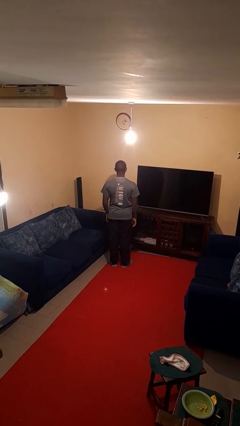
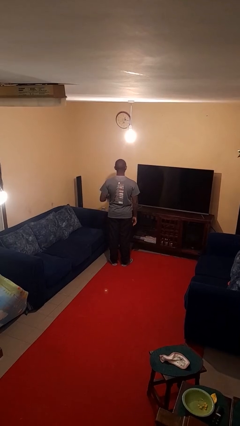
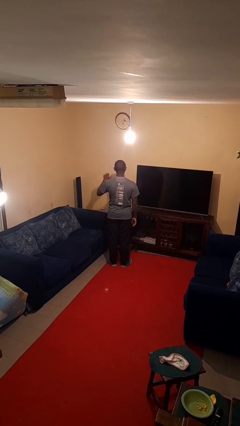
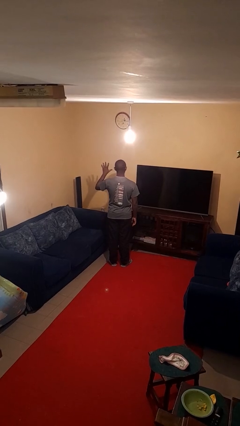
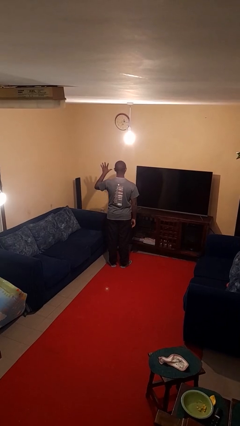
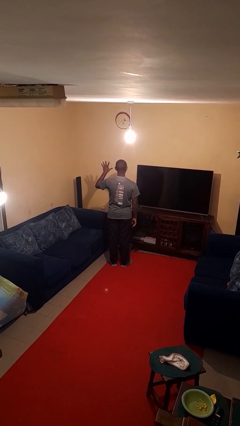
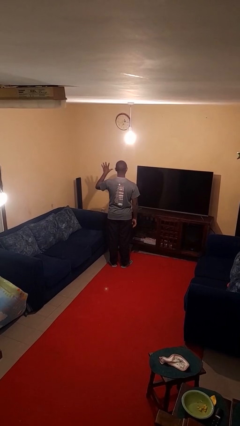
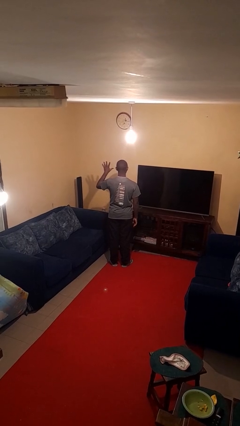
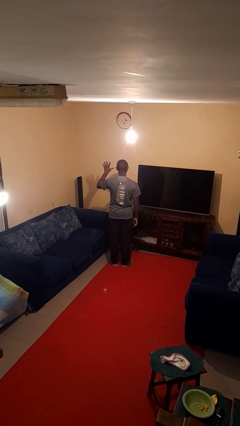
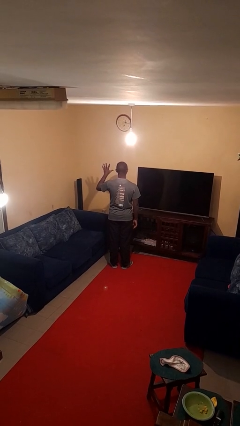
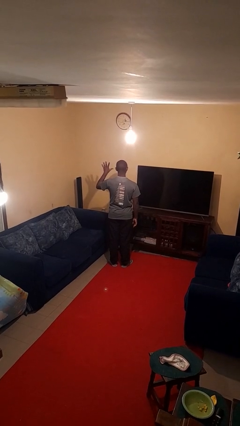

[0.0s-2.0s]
person gestures number five

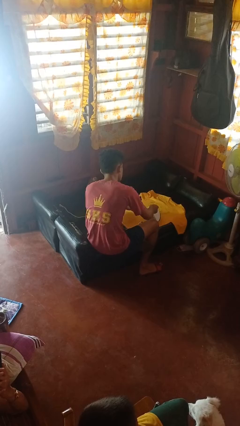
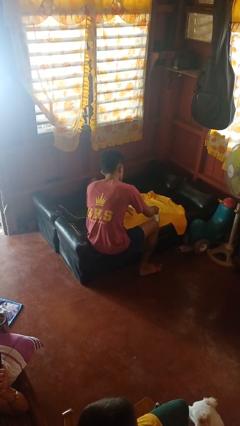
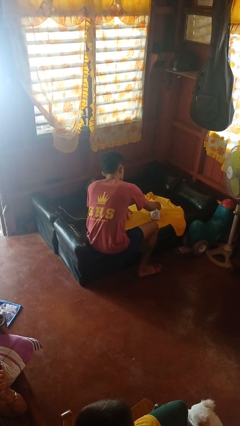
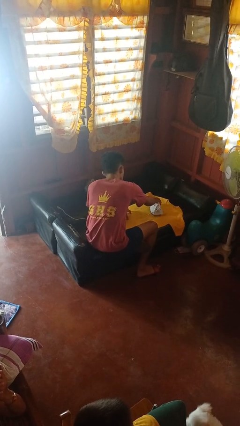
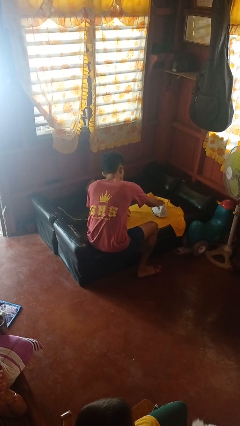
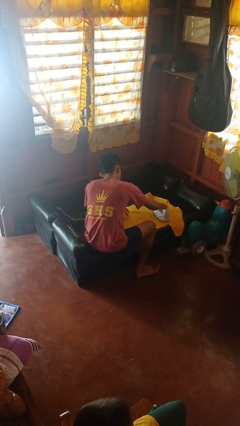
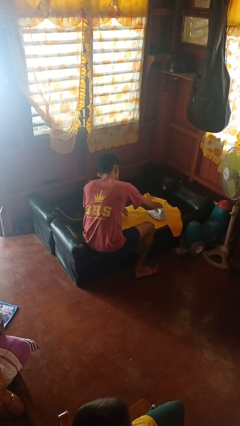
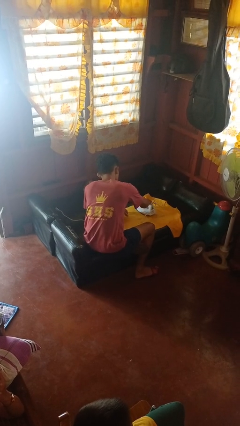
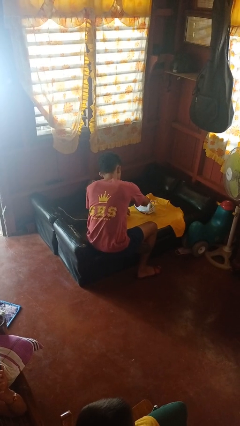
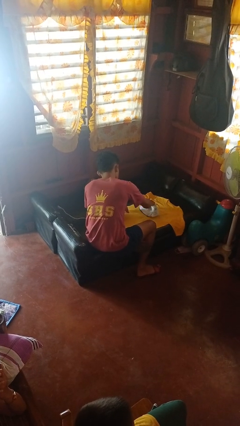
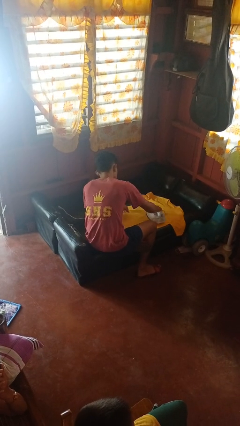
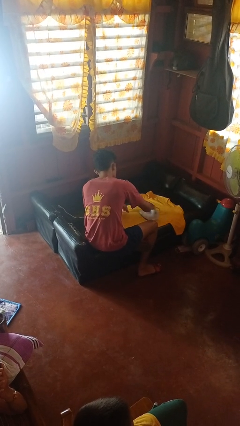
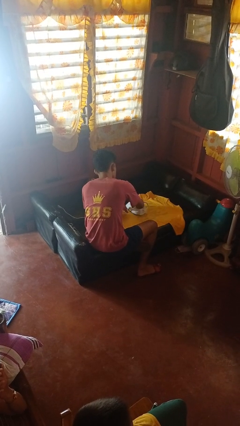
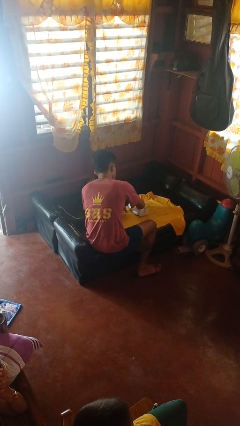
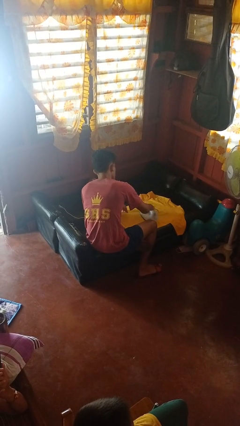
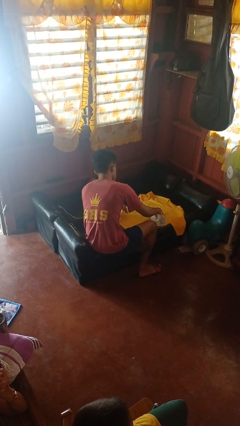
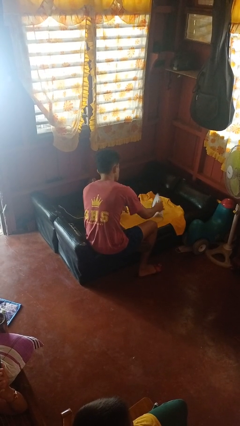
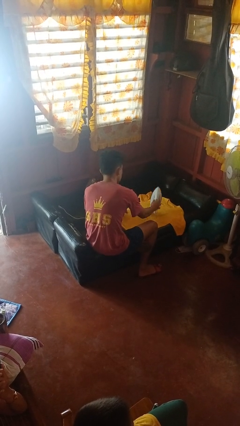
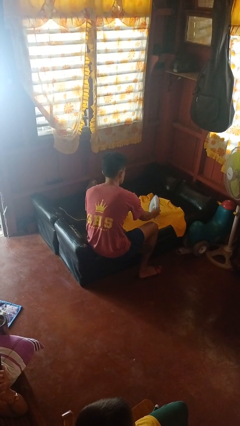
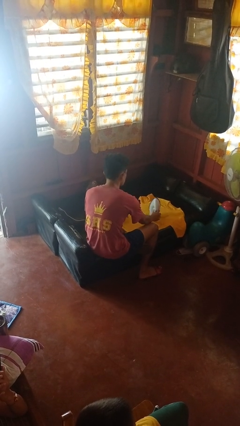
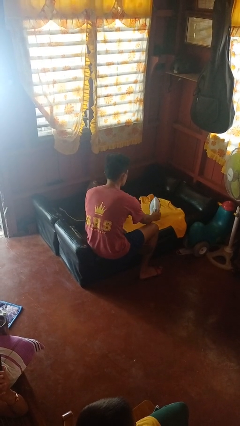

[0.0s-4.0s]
person irons clothes

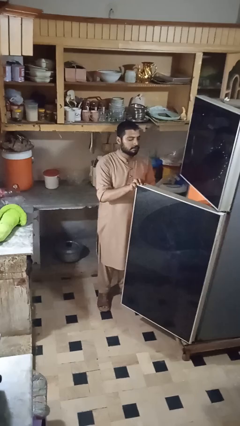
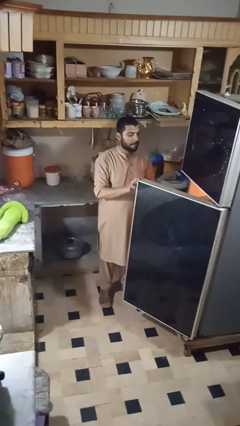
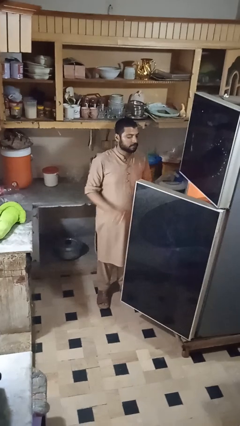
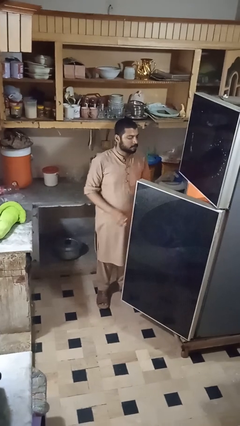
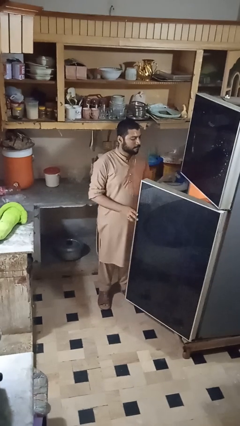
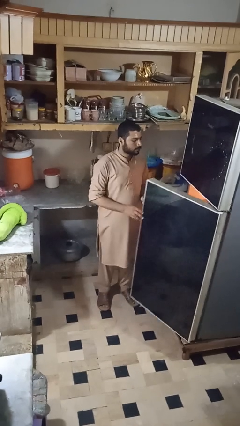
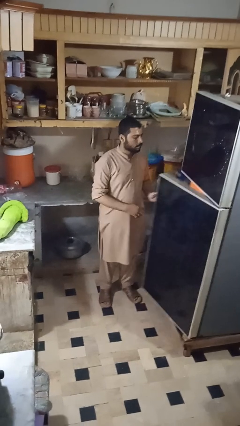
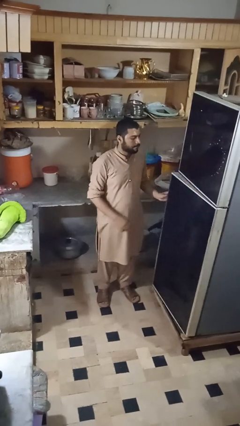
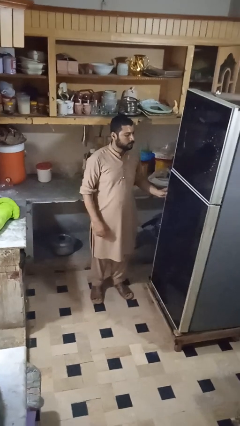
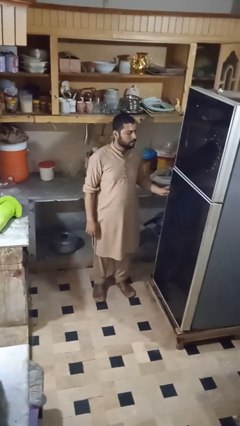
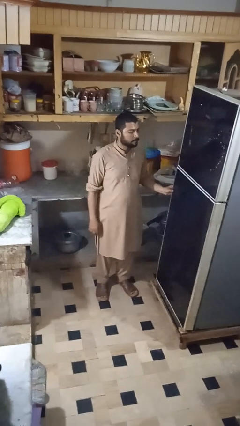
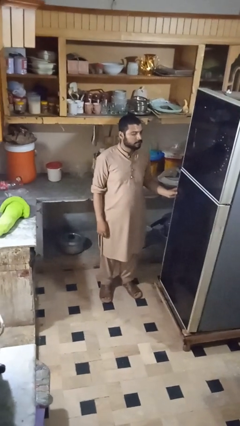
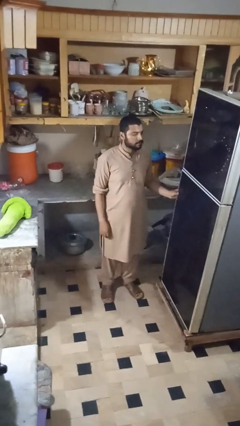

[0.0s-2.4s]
person closes refrigerator

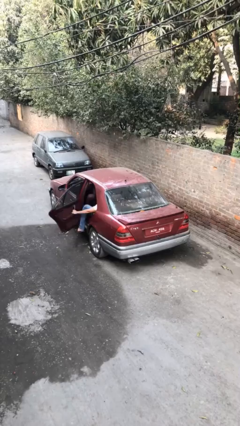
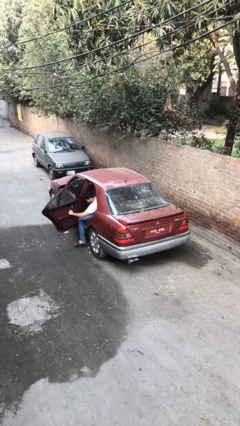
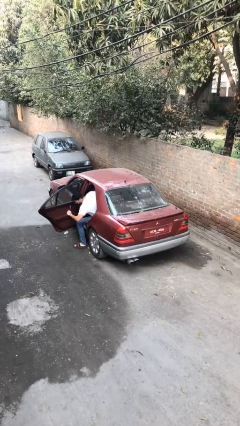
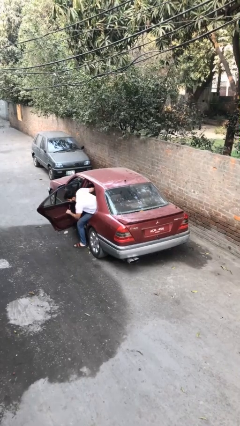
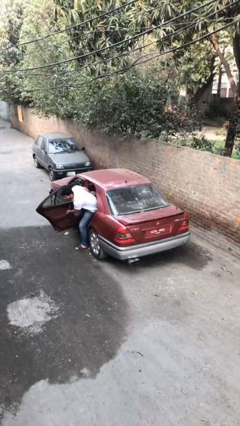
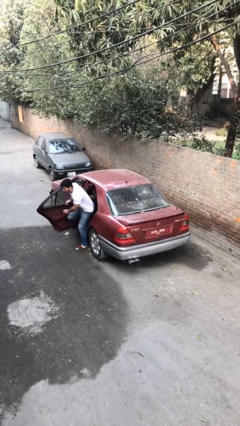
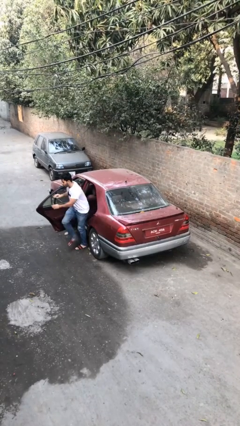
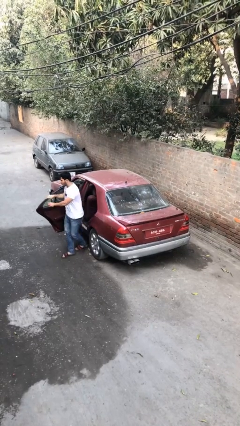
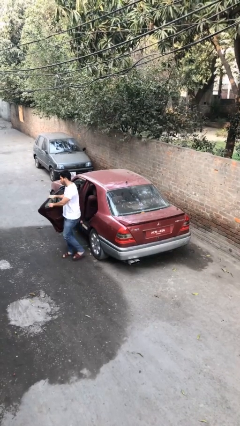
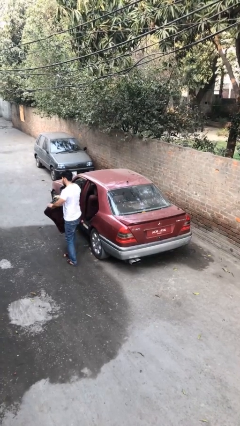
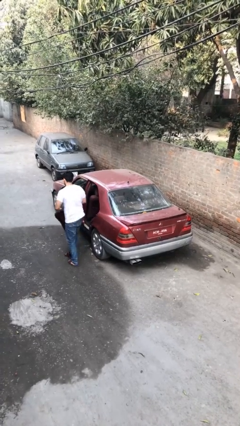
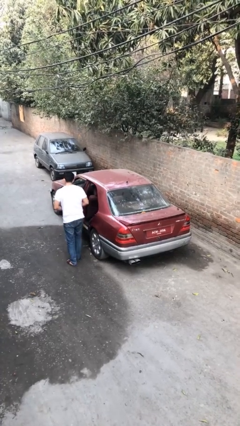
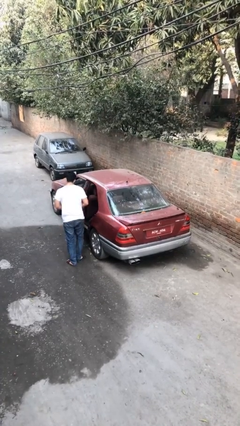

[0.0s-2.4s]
car drops off person

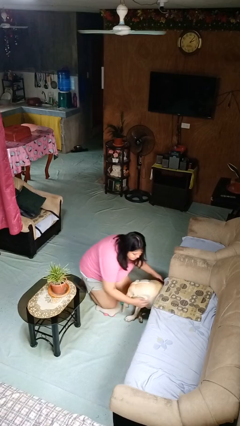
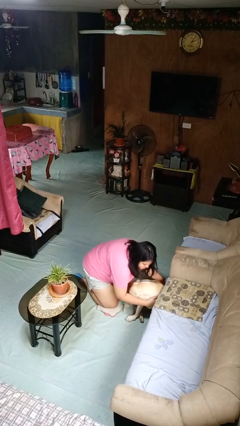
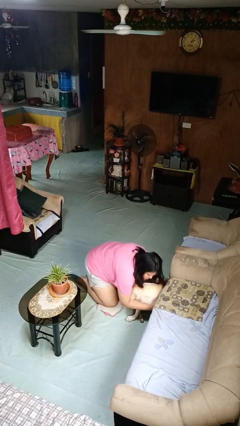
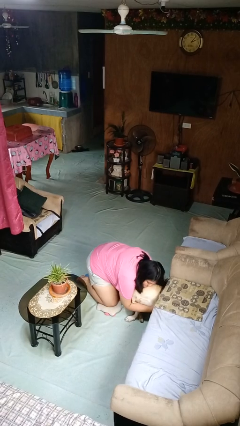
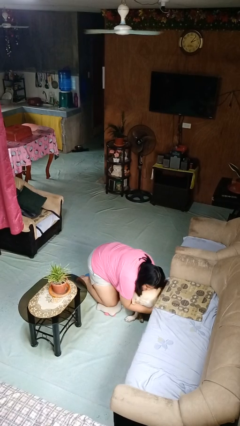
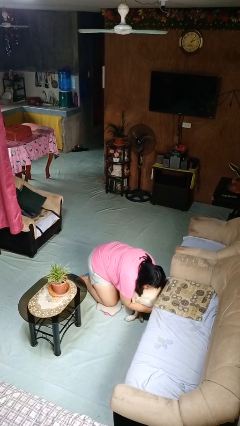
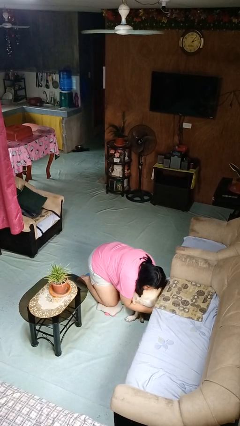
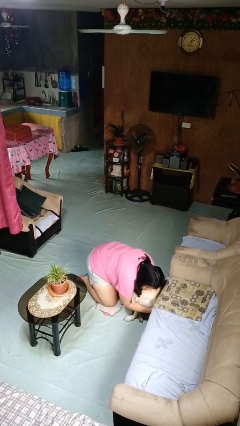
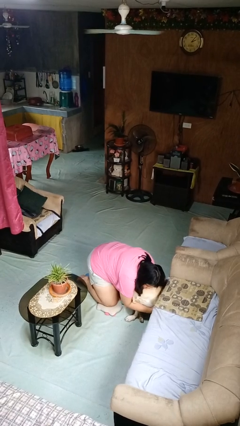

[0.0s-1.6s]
person hugs dog

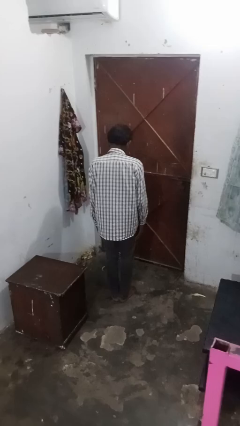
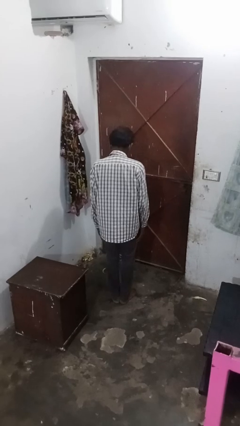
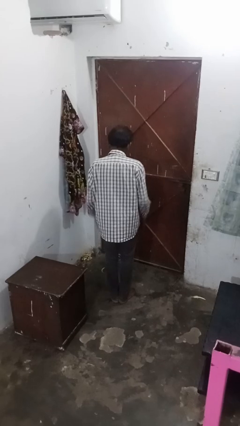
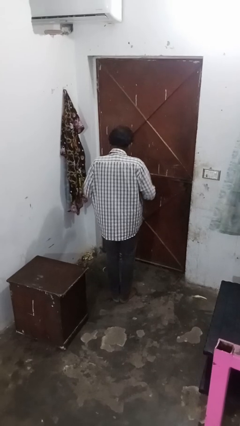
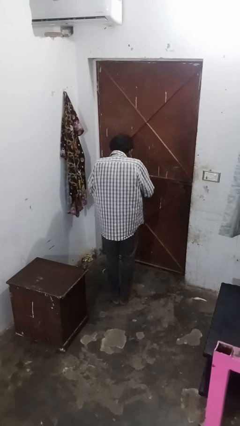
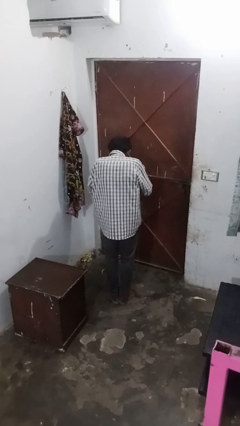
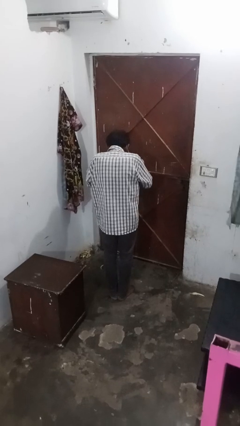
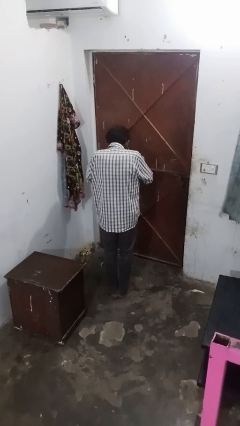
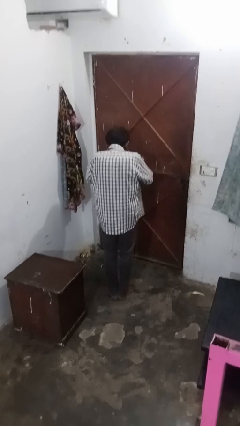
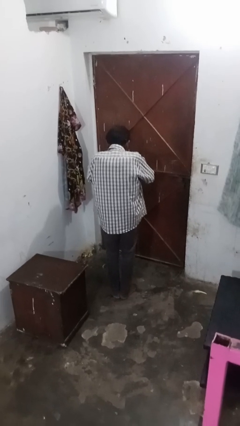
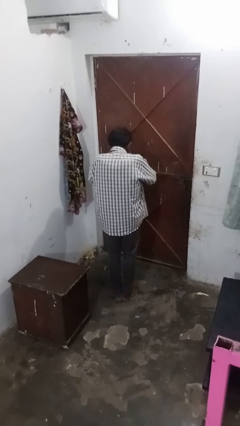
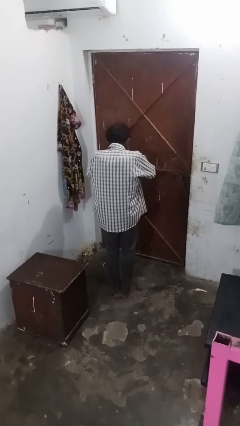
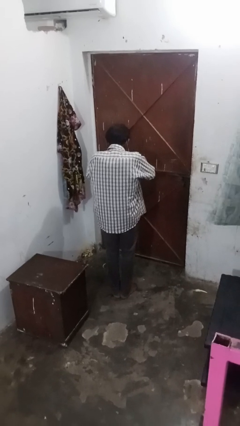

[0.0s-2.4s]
person blows nose

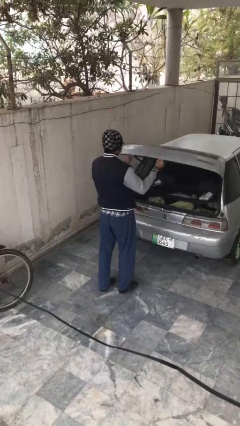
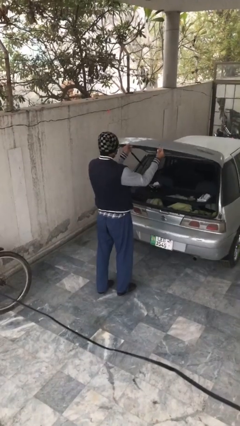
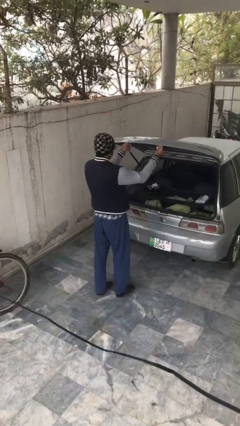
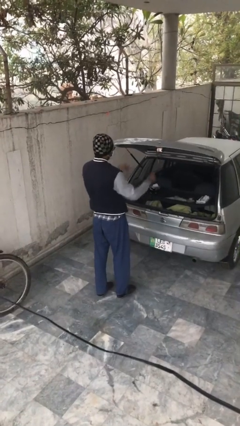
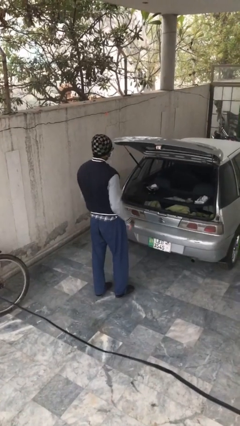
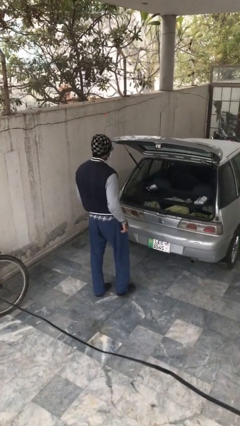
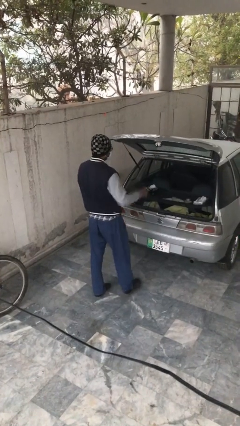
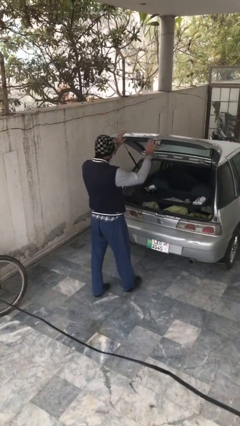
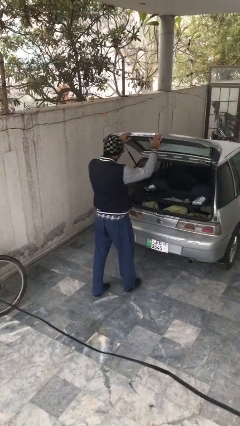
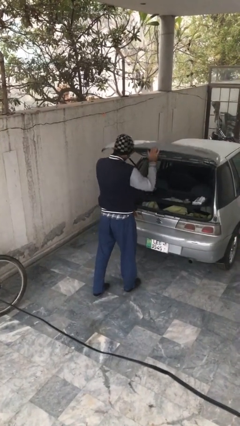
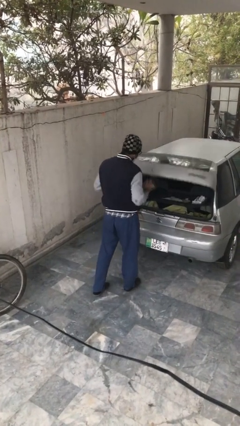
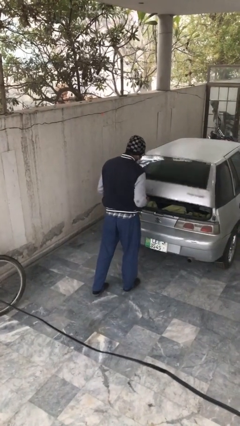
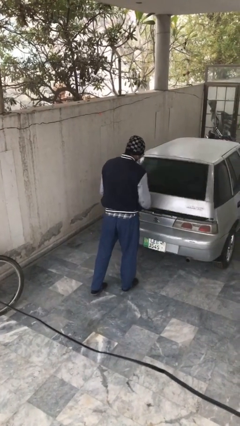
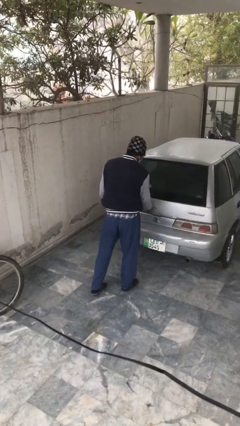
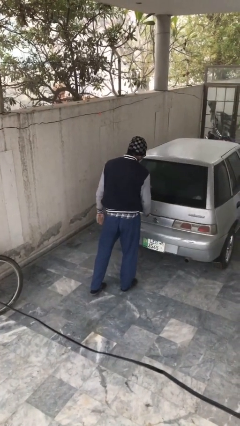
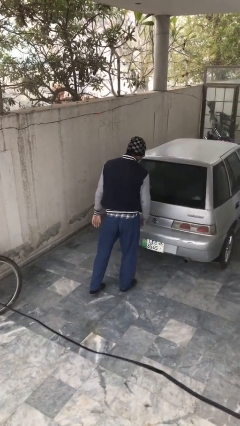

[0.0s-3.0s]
person closes car trunk
